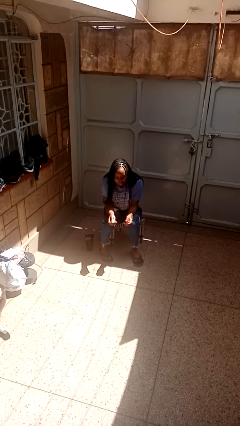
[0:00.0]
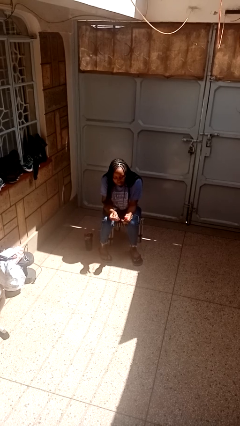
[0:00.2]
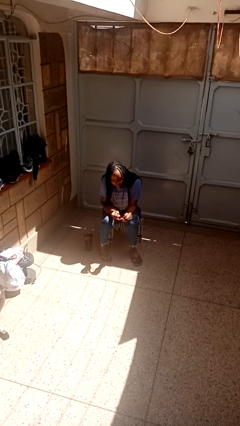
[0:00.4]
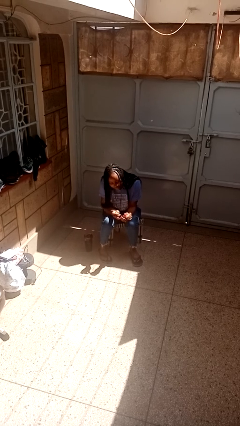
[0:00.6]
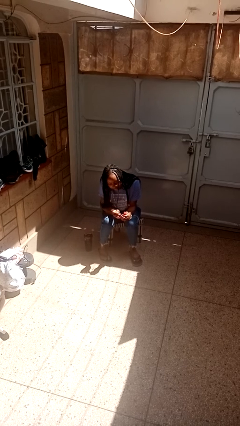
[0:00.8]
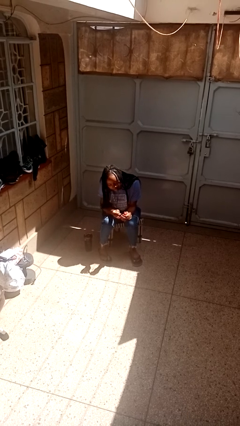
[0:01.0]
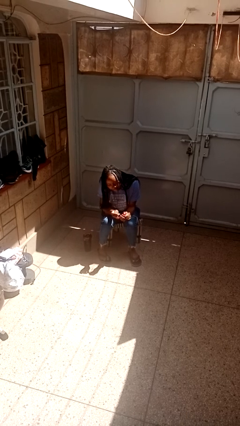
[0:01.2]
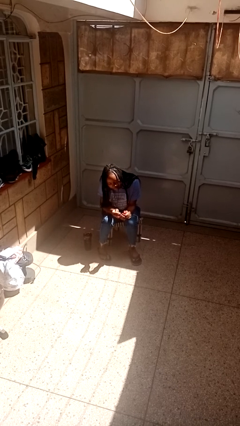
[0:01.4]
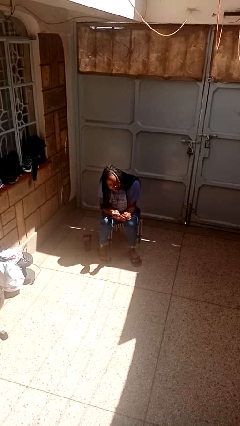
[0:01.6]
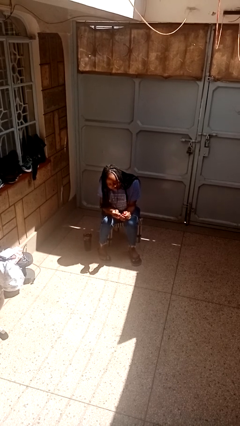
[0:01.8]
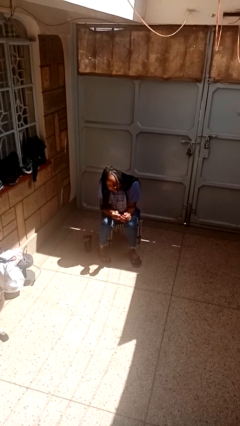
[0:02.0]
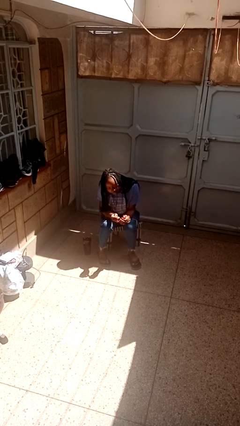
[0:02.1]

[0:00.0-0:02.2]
person paints fingernails

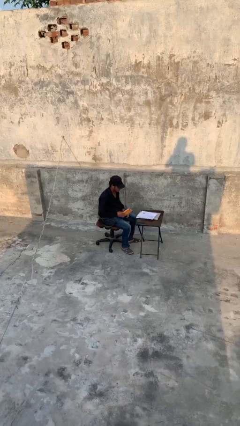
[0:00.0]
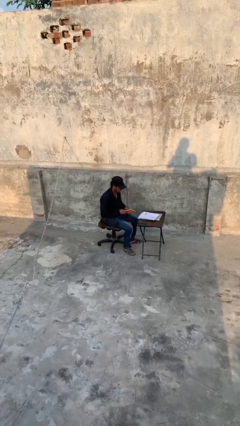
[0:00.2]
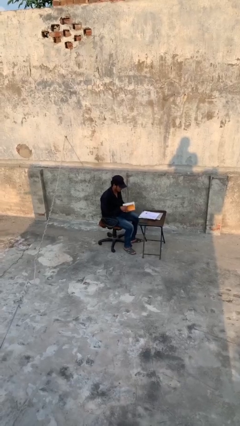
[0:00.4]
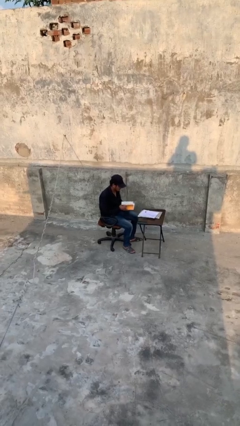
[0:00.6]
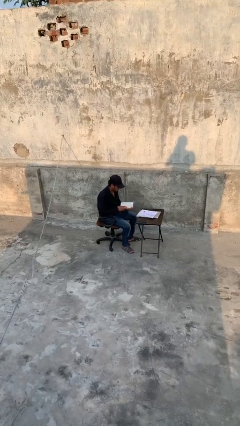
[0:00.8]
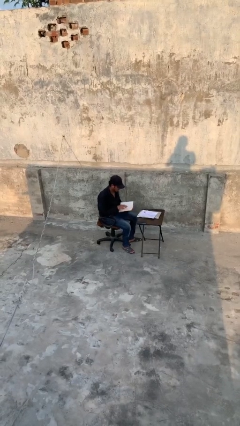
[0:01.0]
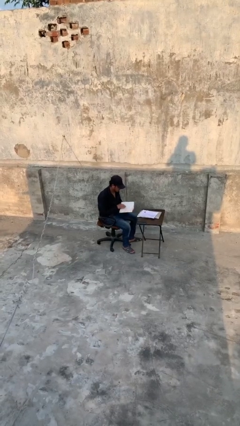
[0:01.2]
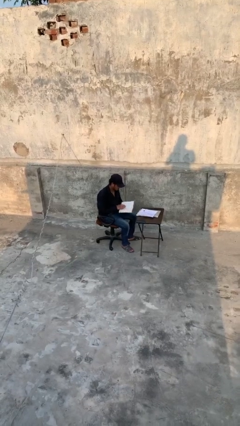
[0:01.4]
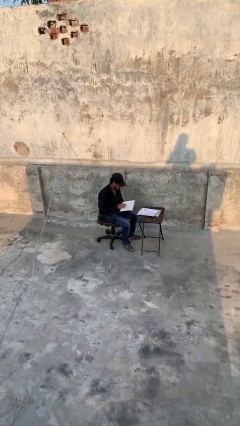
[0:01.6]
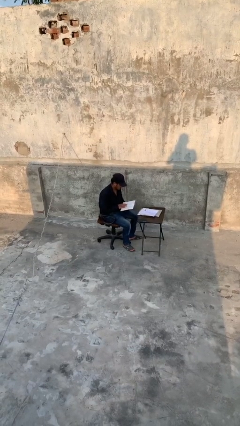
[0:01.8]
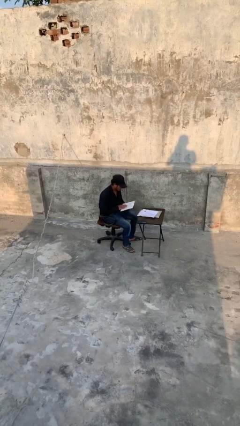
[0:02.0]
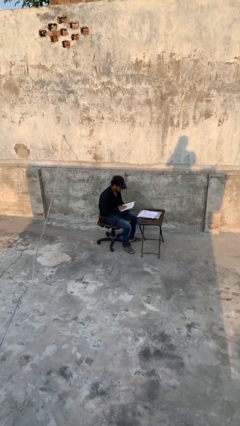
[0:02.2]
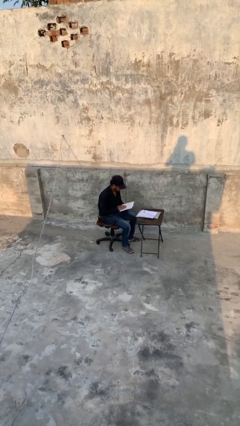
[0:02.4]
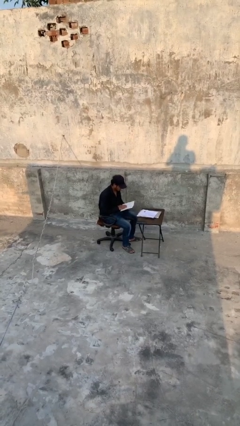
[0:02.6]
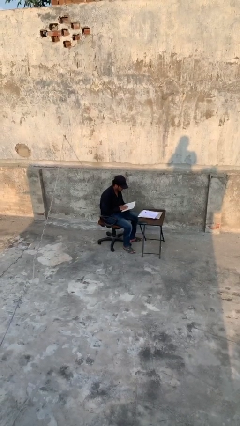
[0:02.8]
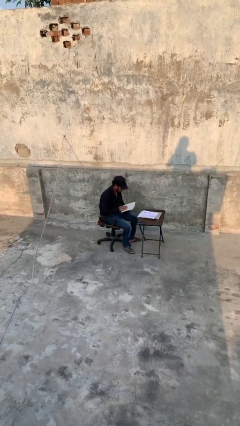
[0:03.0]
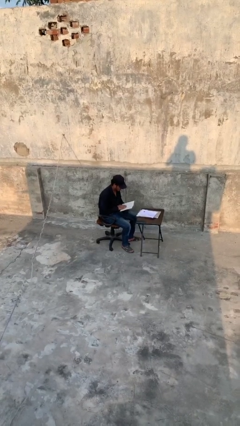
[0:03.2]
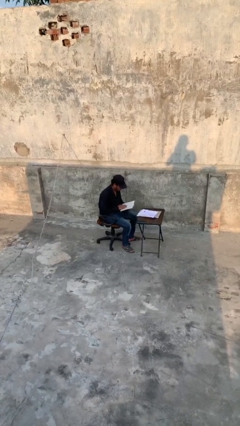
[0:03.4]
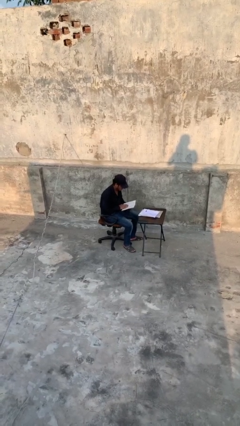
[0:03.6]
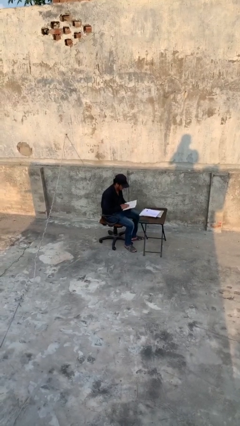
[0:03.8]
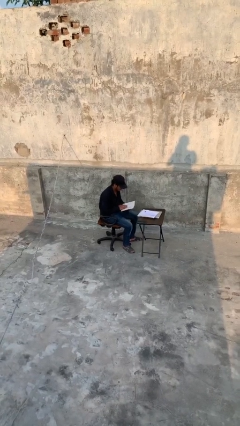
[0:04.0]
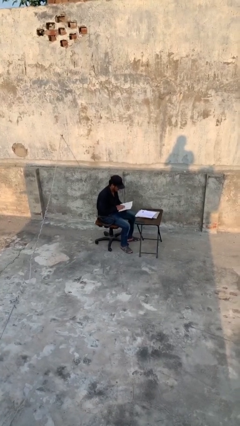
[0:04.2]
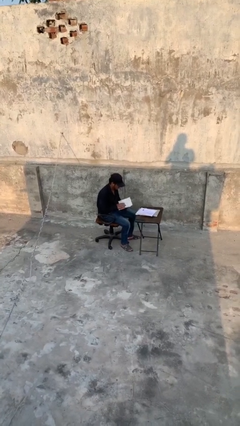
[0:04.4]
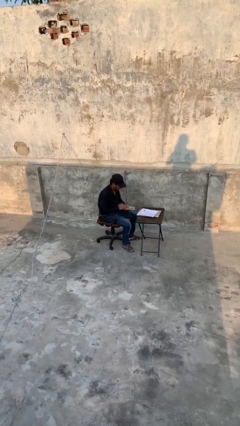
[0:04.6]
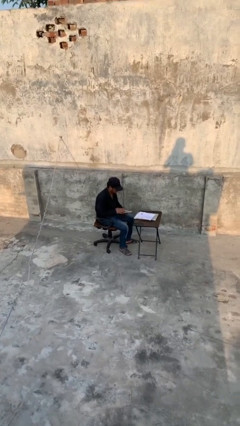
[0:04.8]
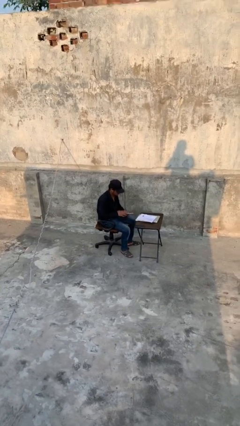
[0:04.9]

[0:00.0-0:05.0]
person reads document

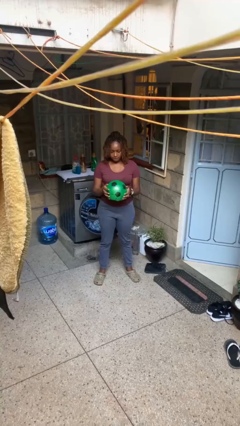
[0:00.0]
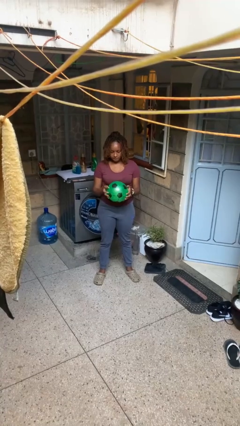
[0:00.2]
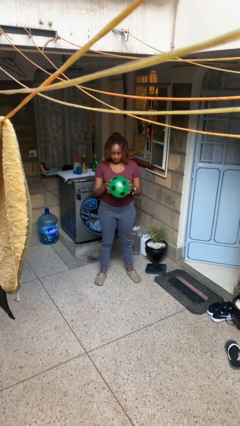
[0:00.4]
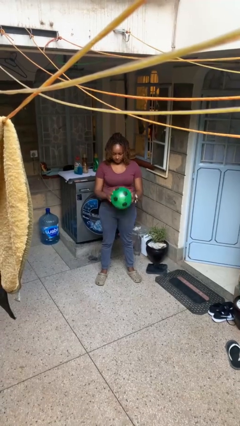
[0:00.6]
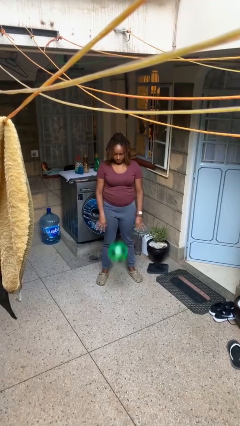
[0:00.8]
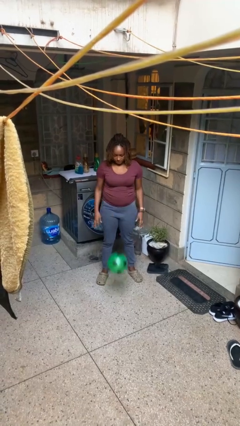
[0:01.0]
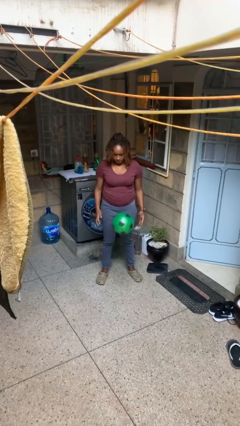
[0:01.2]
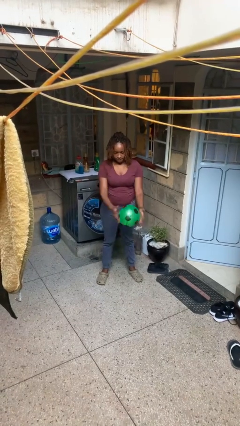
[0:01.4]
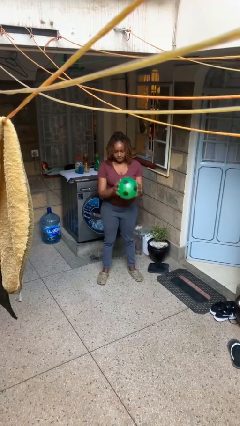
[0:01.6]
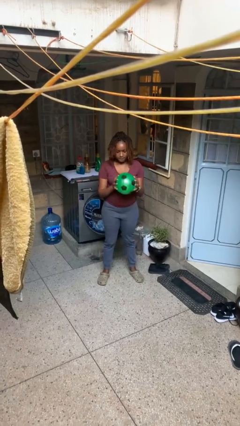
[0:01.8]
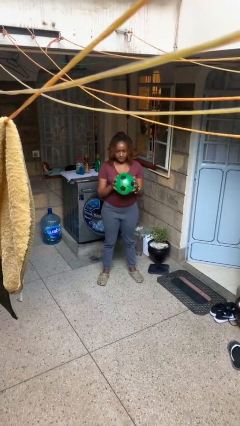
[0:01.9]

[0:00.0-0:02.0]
person bounces ball on floor

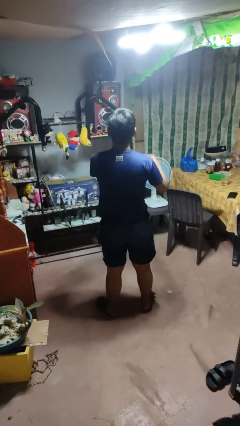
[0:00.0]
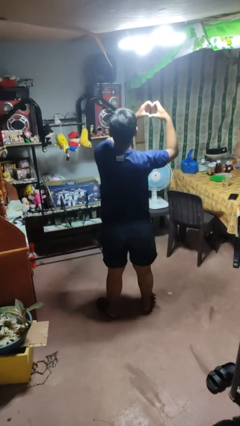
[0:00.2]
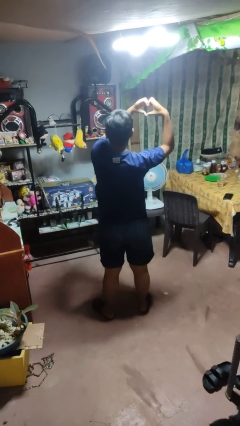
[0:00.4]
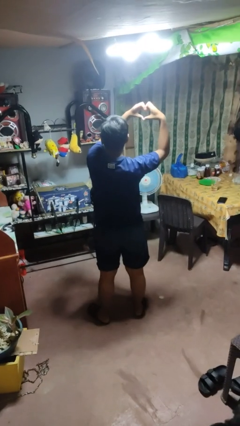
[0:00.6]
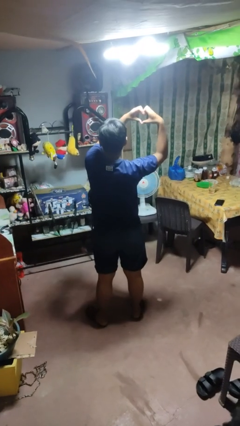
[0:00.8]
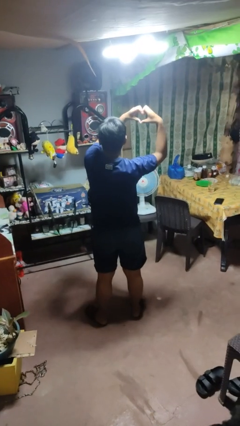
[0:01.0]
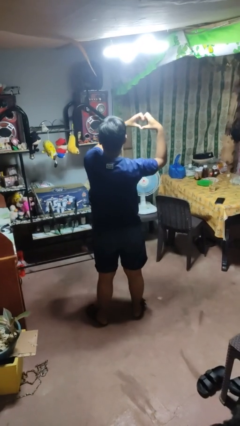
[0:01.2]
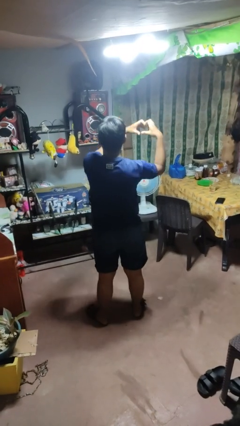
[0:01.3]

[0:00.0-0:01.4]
person gestures heart

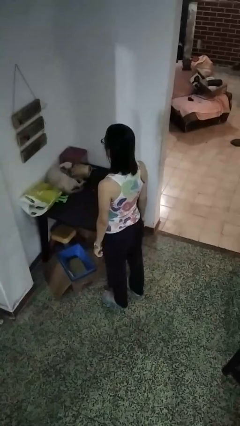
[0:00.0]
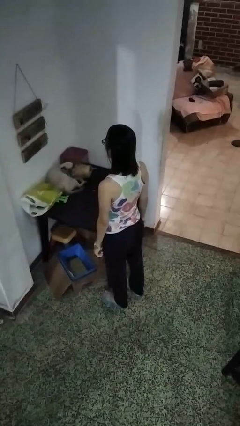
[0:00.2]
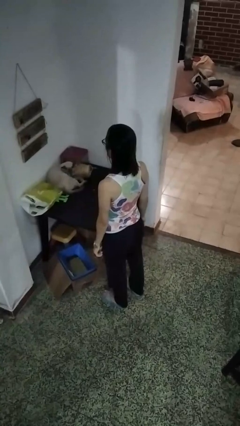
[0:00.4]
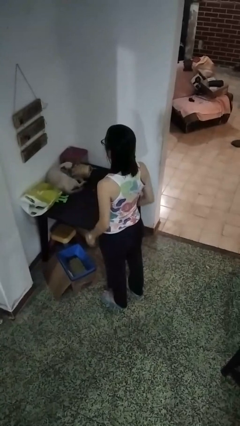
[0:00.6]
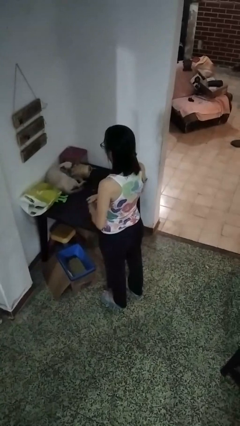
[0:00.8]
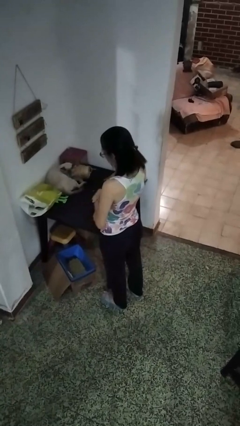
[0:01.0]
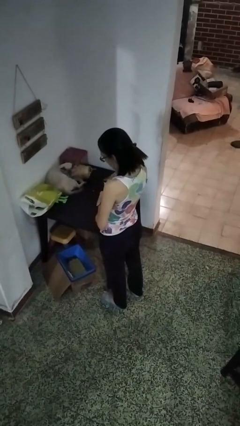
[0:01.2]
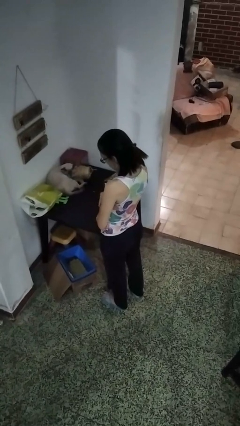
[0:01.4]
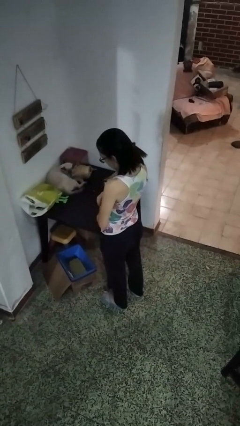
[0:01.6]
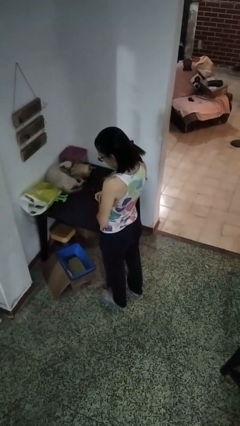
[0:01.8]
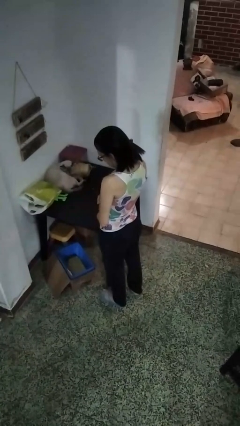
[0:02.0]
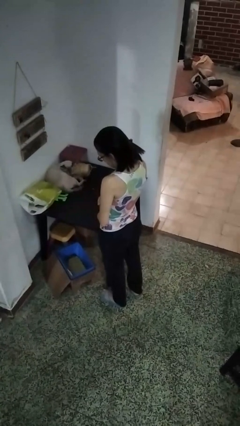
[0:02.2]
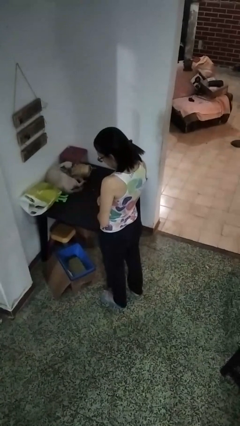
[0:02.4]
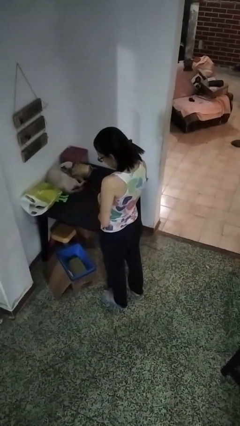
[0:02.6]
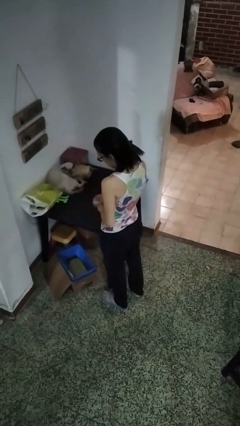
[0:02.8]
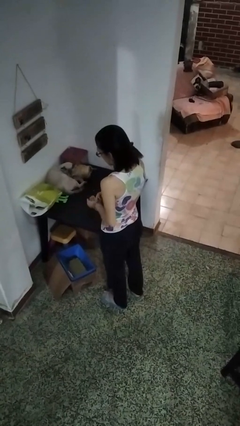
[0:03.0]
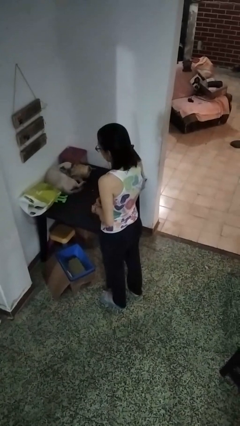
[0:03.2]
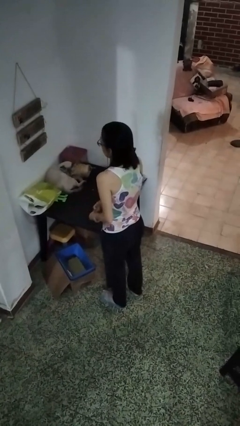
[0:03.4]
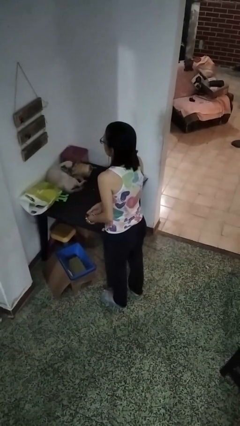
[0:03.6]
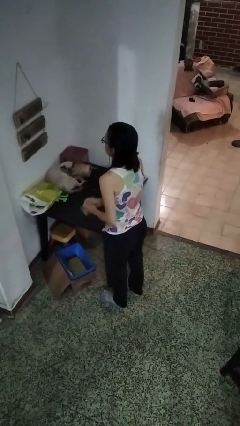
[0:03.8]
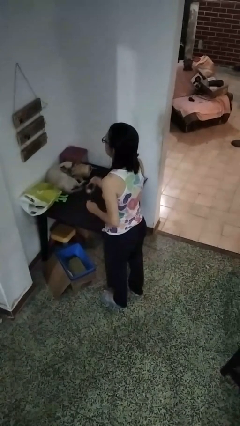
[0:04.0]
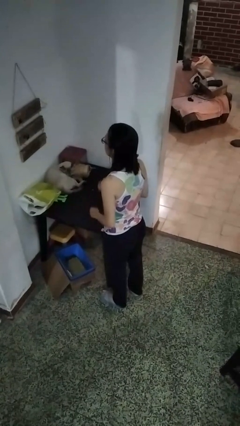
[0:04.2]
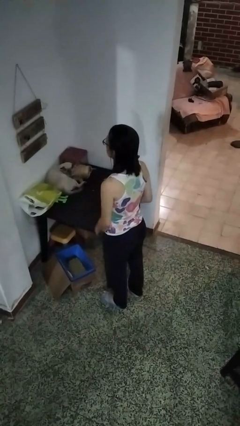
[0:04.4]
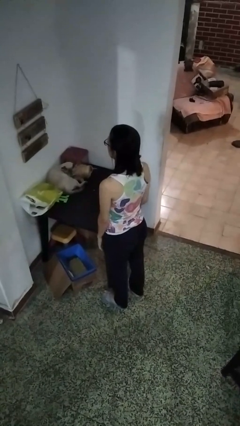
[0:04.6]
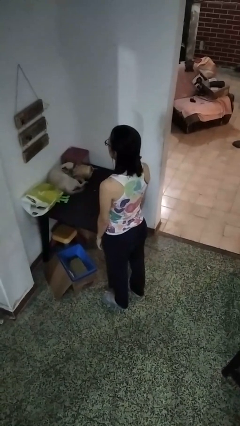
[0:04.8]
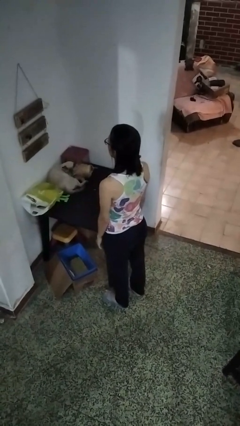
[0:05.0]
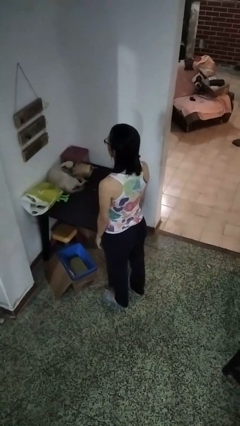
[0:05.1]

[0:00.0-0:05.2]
person takes off wristwatch

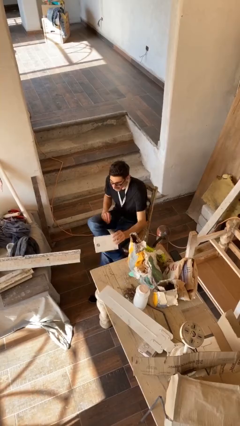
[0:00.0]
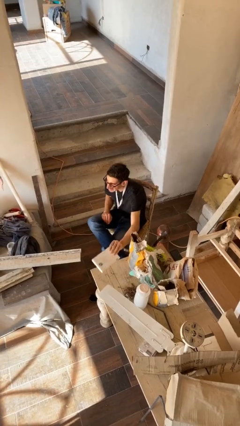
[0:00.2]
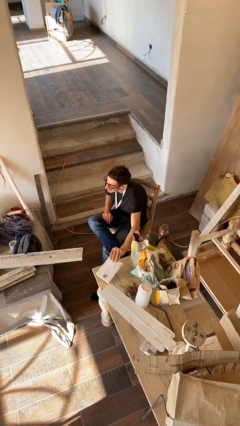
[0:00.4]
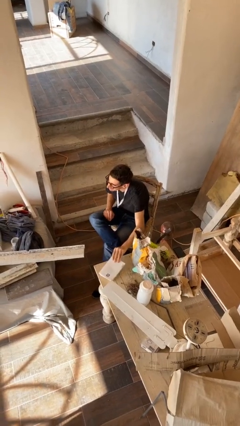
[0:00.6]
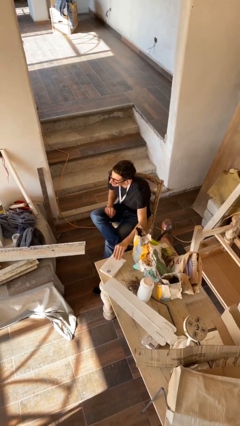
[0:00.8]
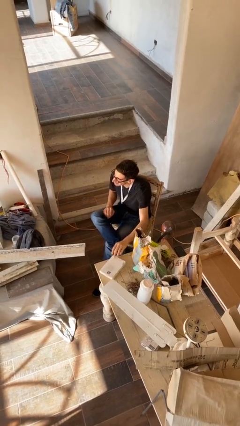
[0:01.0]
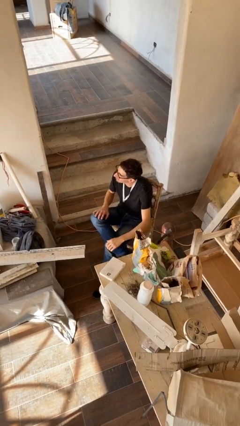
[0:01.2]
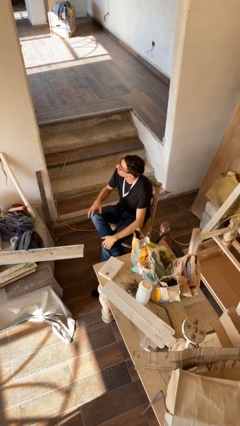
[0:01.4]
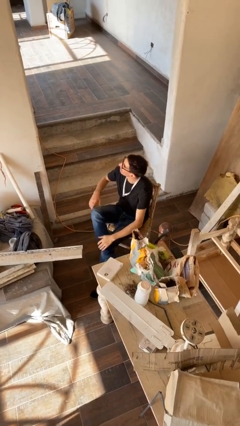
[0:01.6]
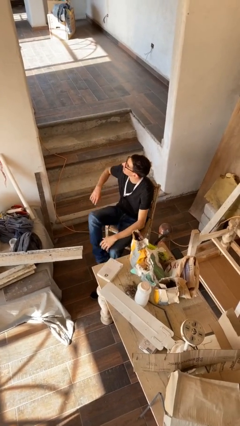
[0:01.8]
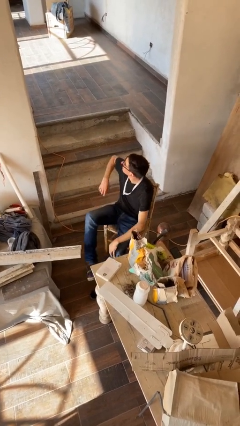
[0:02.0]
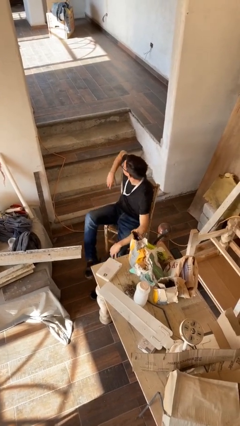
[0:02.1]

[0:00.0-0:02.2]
person puts down object on table
